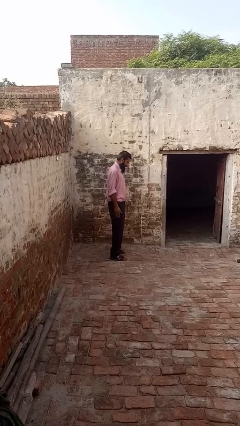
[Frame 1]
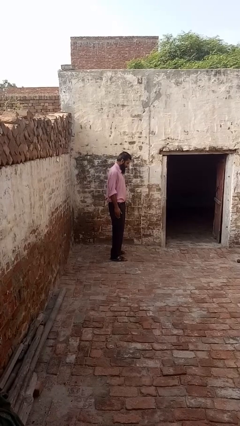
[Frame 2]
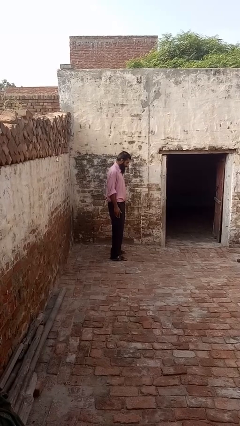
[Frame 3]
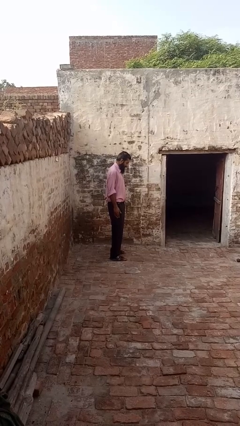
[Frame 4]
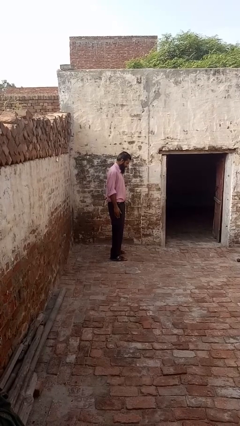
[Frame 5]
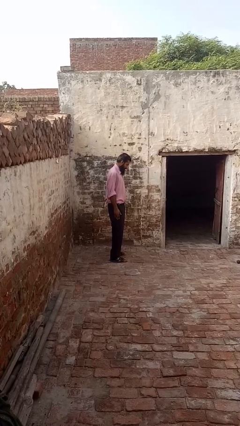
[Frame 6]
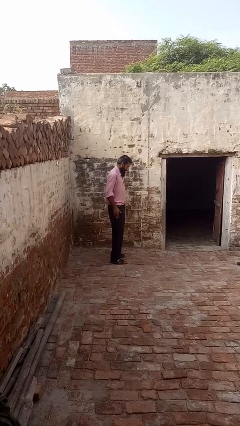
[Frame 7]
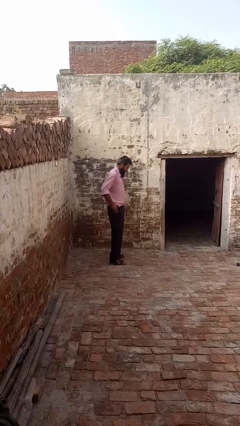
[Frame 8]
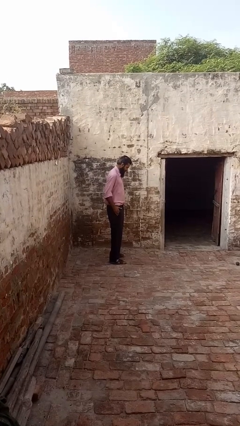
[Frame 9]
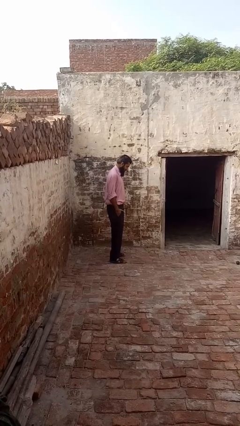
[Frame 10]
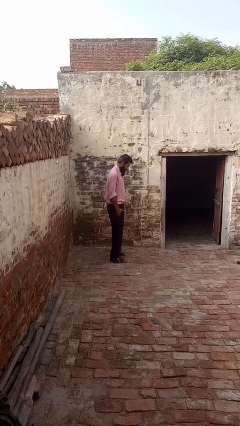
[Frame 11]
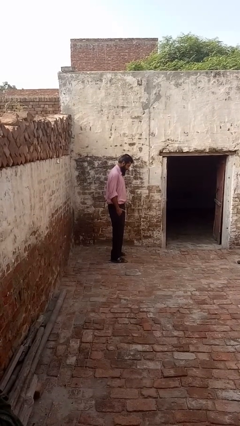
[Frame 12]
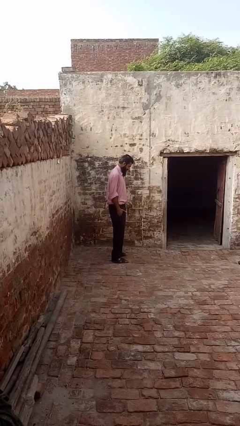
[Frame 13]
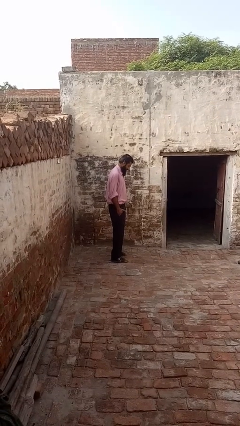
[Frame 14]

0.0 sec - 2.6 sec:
person puts hands in back pockets

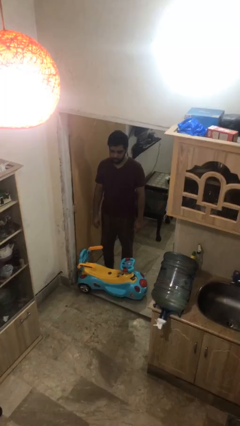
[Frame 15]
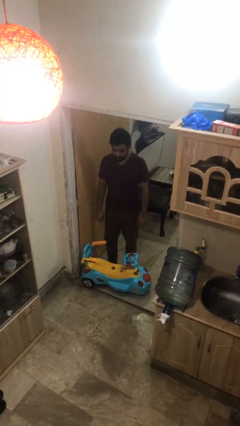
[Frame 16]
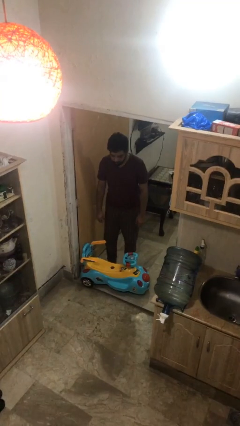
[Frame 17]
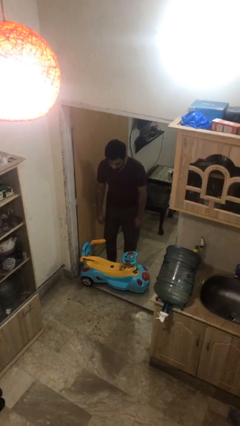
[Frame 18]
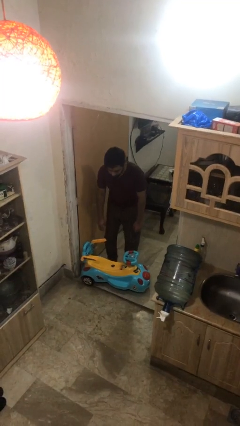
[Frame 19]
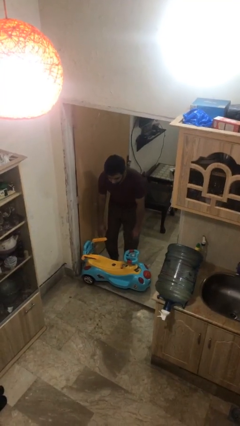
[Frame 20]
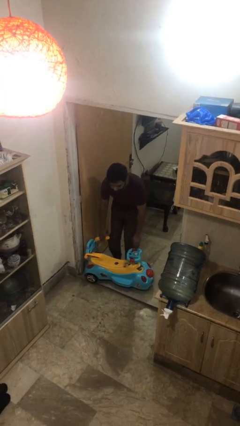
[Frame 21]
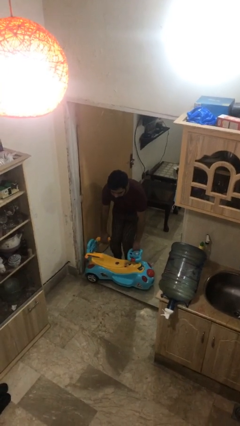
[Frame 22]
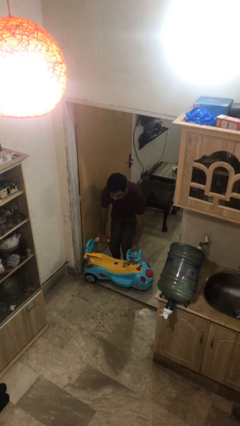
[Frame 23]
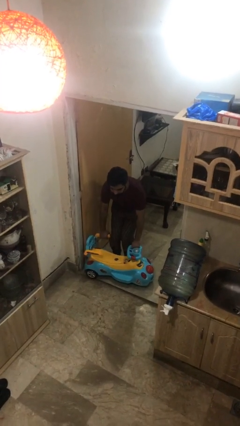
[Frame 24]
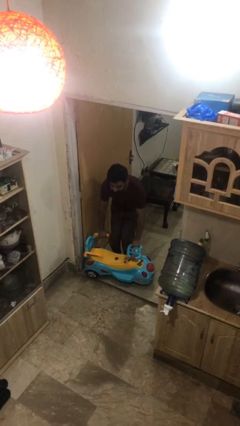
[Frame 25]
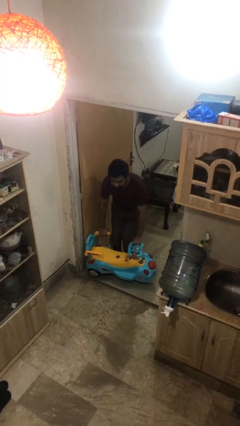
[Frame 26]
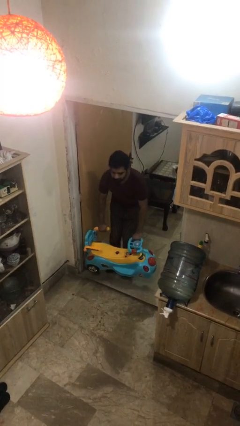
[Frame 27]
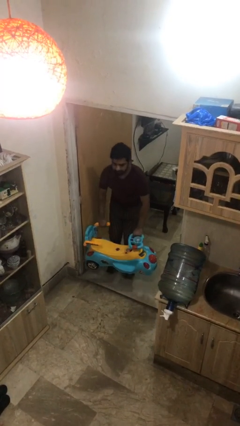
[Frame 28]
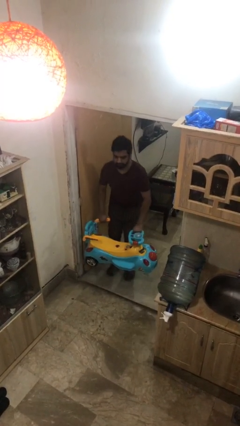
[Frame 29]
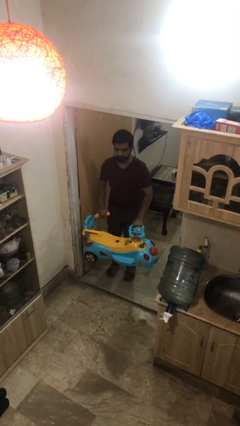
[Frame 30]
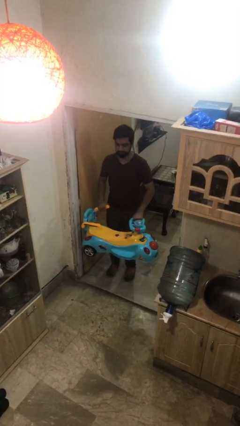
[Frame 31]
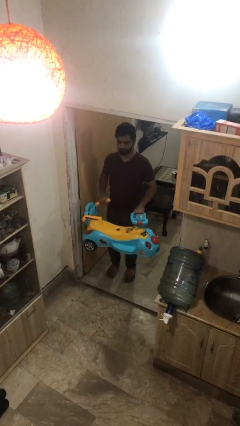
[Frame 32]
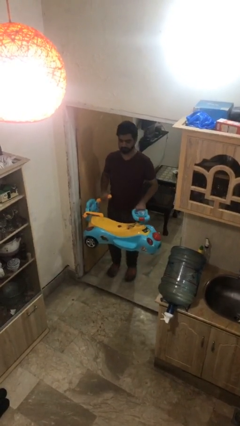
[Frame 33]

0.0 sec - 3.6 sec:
person picks up object from floor

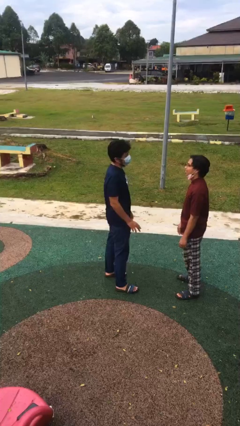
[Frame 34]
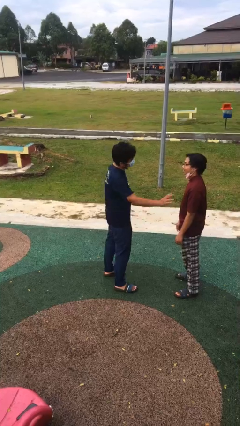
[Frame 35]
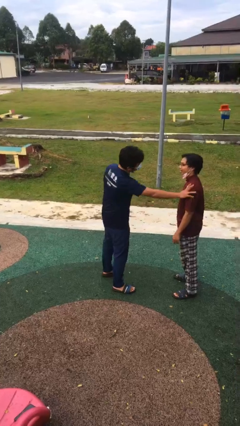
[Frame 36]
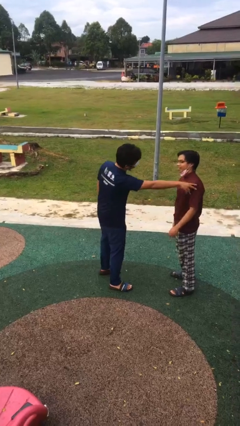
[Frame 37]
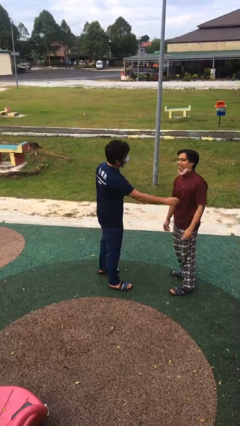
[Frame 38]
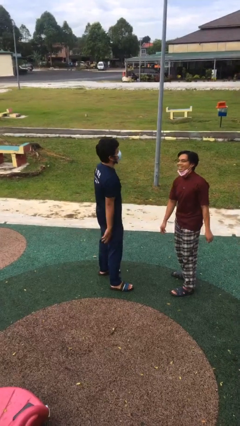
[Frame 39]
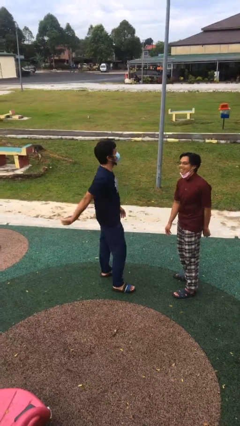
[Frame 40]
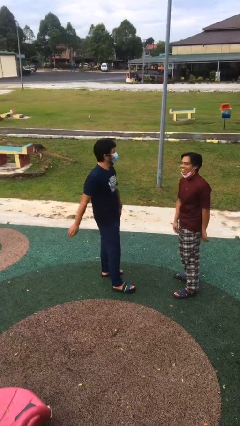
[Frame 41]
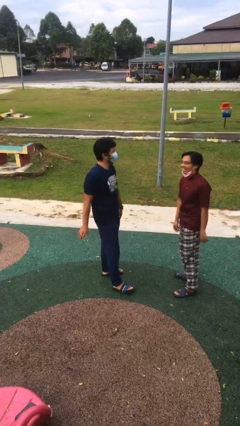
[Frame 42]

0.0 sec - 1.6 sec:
person shoves person

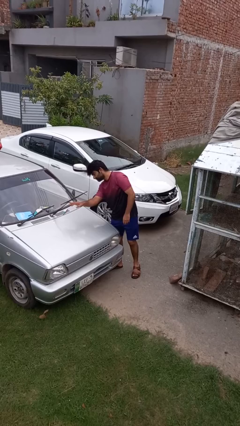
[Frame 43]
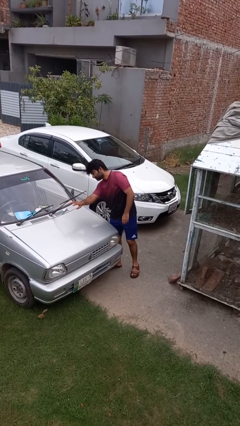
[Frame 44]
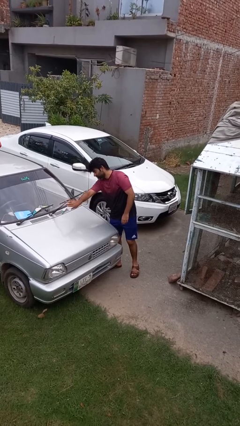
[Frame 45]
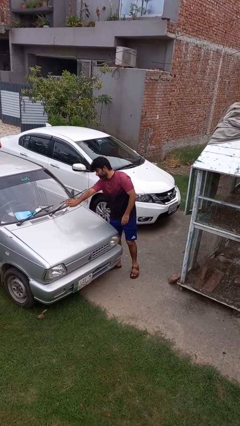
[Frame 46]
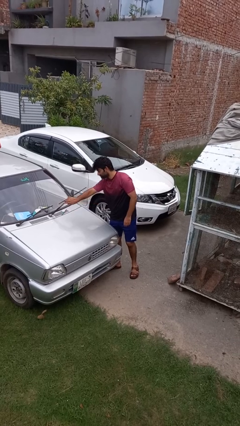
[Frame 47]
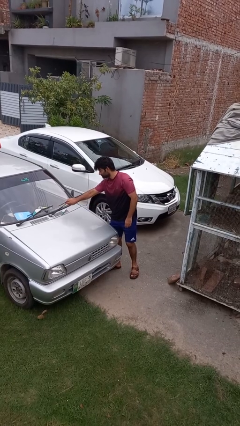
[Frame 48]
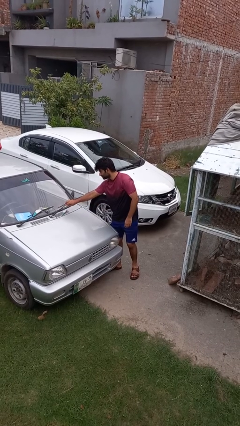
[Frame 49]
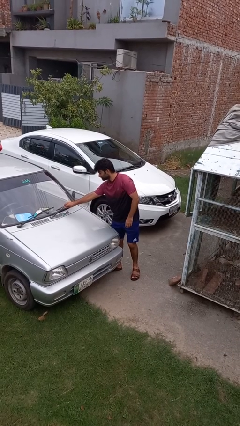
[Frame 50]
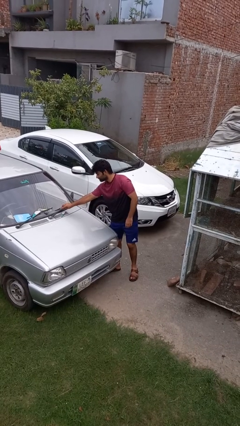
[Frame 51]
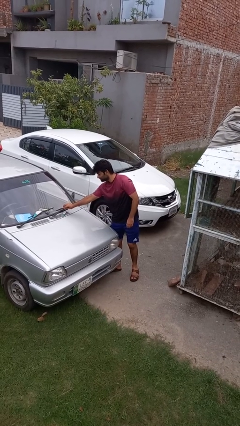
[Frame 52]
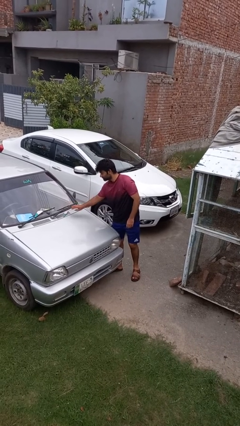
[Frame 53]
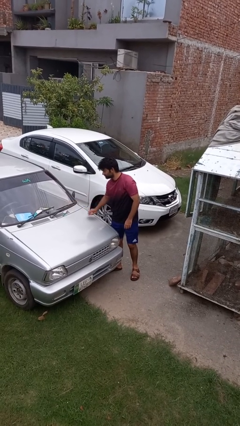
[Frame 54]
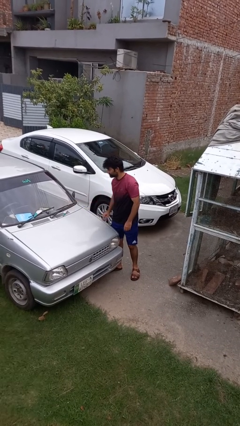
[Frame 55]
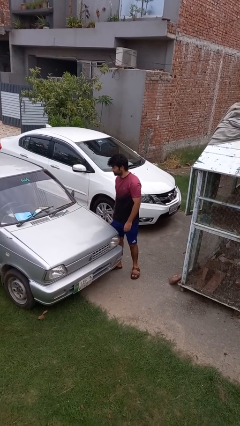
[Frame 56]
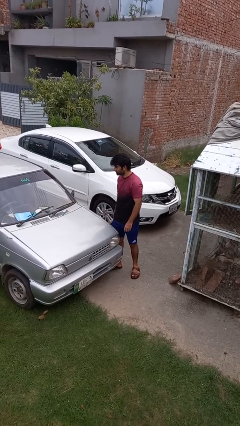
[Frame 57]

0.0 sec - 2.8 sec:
person flips down car wipers

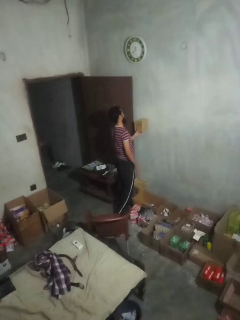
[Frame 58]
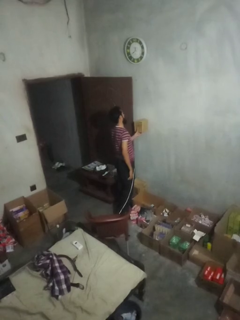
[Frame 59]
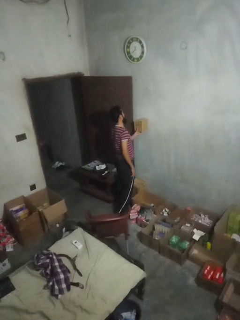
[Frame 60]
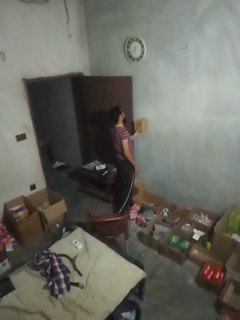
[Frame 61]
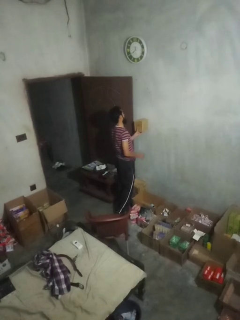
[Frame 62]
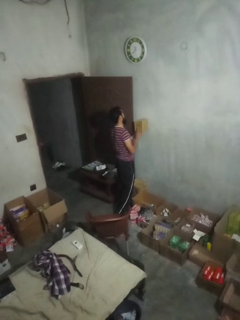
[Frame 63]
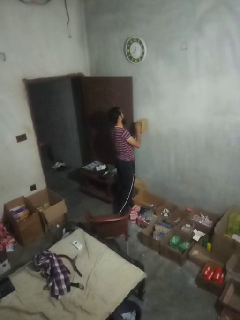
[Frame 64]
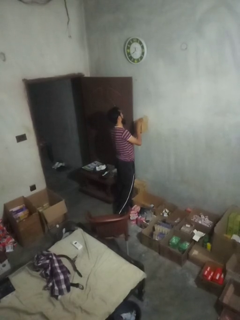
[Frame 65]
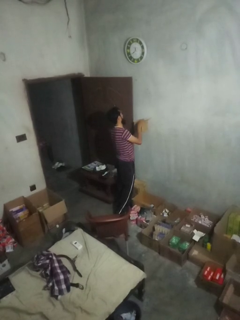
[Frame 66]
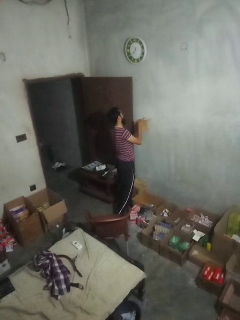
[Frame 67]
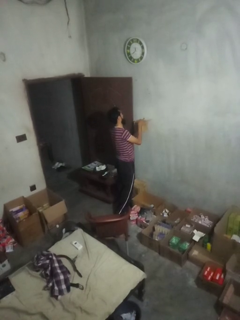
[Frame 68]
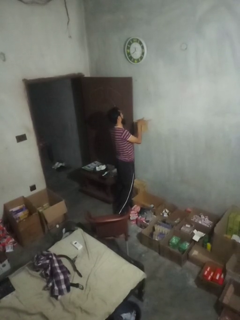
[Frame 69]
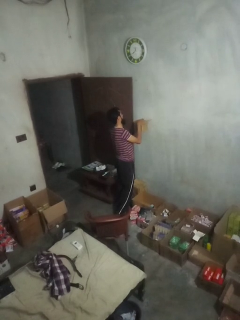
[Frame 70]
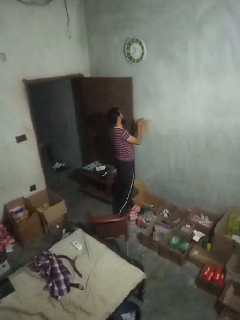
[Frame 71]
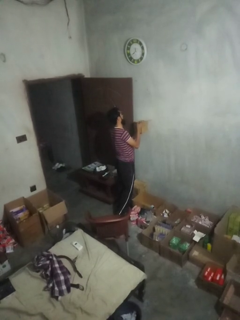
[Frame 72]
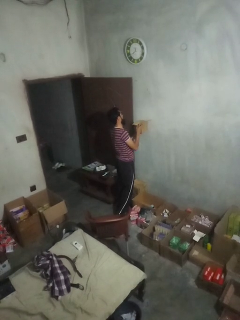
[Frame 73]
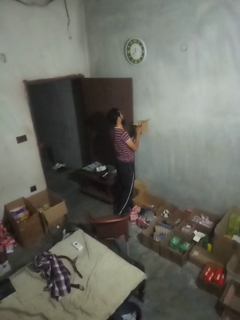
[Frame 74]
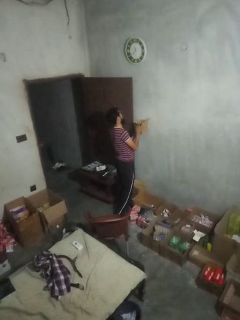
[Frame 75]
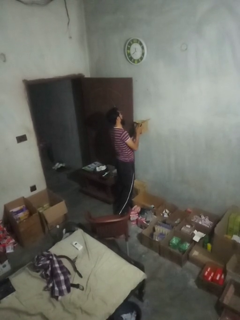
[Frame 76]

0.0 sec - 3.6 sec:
person opens mailbox

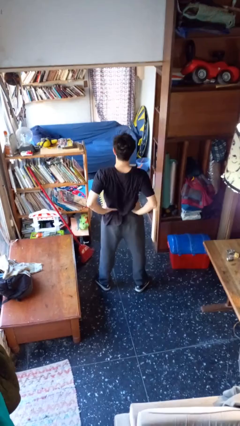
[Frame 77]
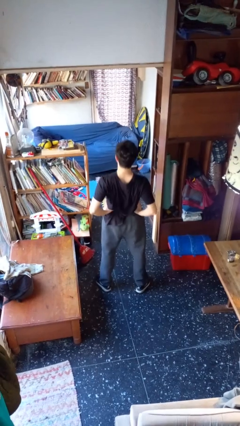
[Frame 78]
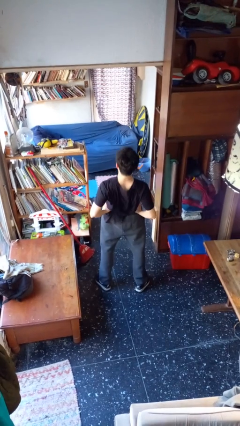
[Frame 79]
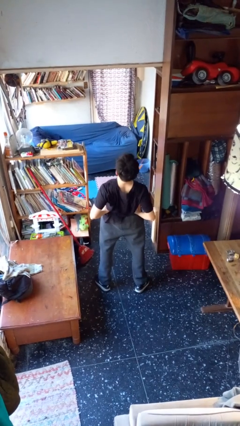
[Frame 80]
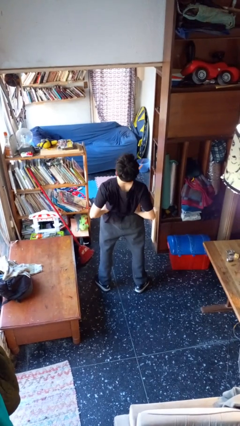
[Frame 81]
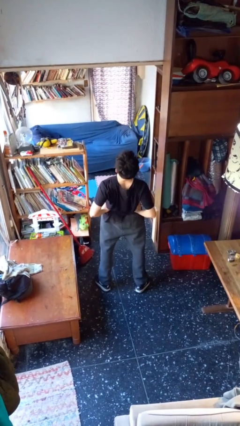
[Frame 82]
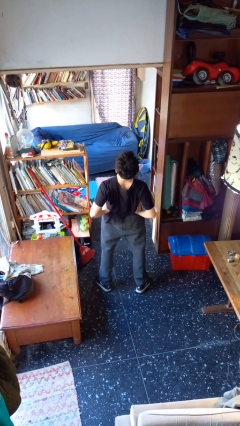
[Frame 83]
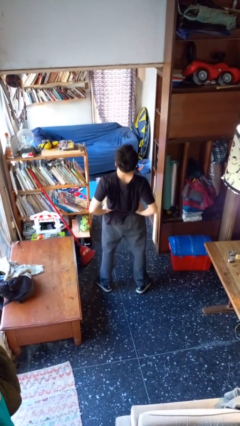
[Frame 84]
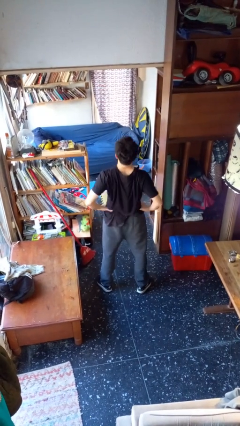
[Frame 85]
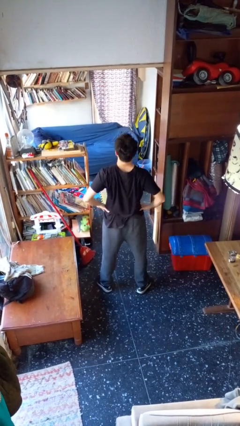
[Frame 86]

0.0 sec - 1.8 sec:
person stretches back

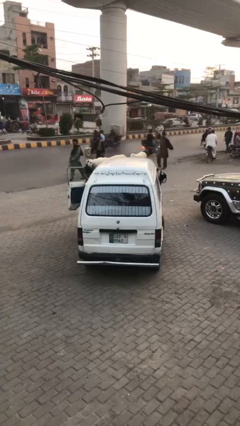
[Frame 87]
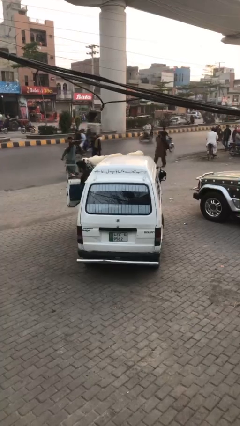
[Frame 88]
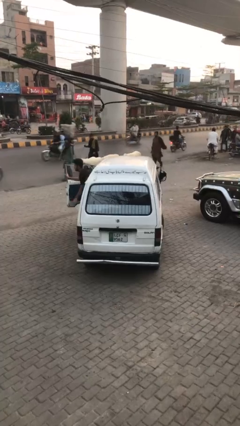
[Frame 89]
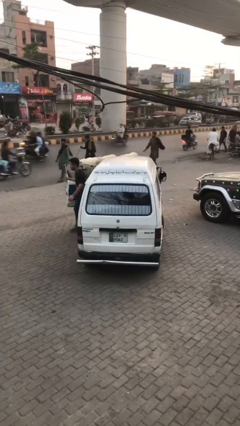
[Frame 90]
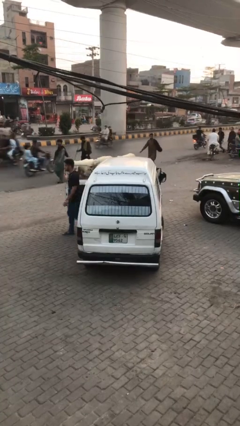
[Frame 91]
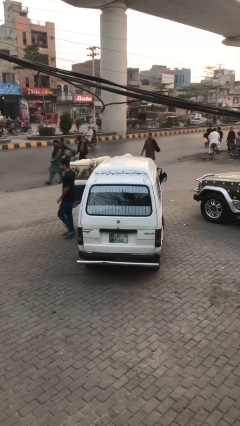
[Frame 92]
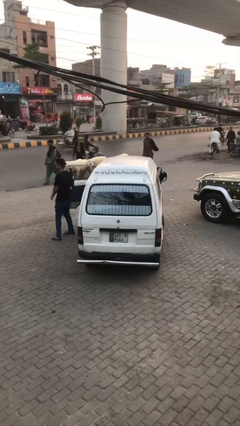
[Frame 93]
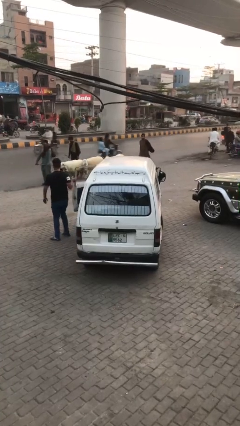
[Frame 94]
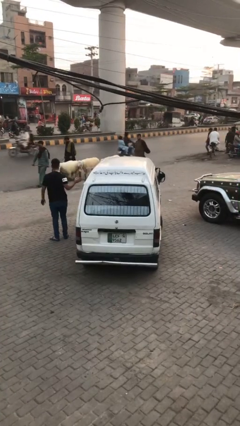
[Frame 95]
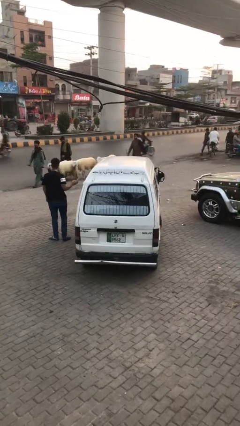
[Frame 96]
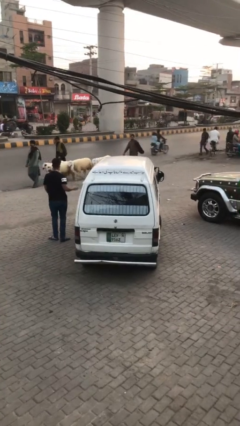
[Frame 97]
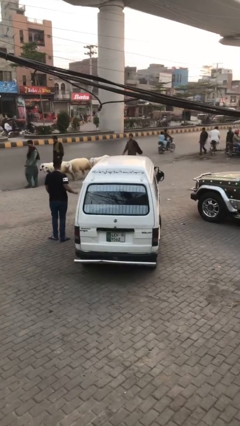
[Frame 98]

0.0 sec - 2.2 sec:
car drops off person
